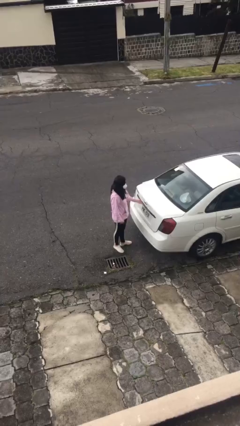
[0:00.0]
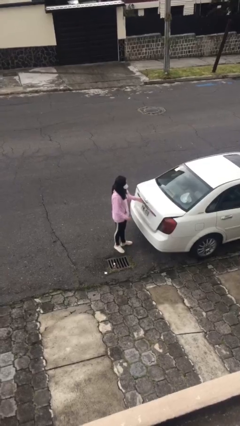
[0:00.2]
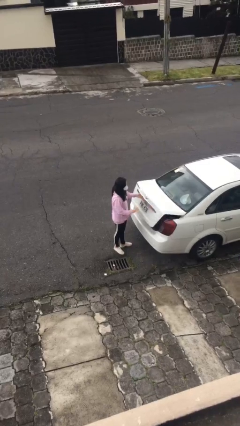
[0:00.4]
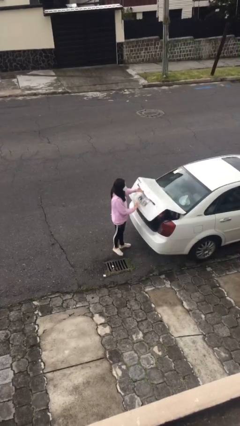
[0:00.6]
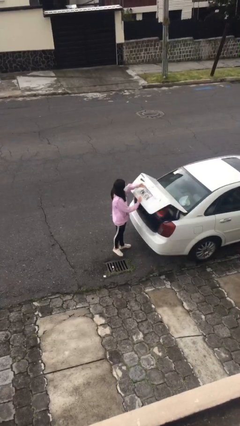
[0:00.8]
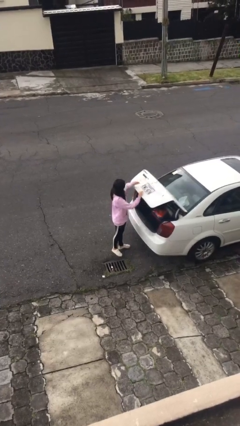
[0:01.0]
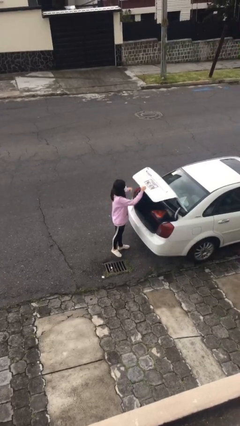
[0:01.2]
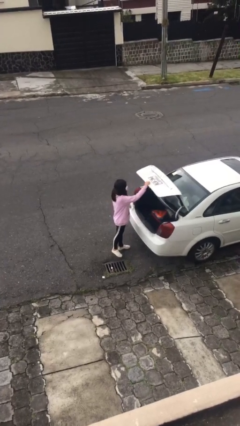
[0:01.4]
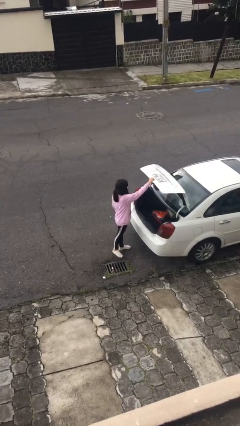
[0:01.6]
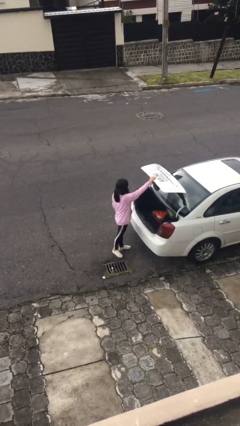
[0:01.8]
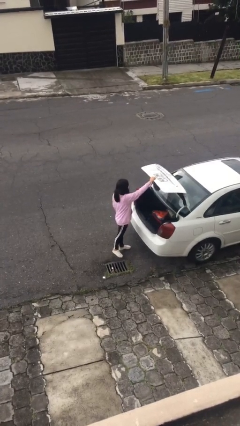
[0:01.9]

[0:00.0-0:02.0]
person opens car trunk

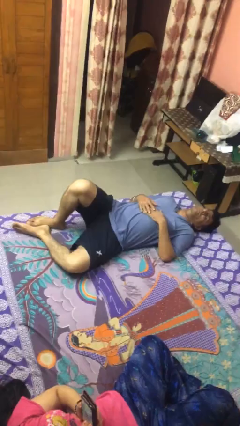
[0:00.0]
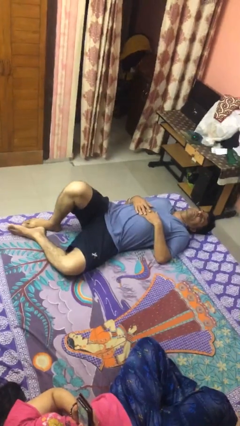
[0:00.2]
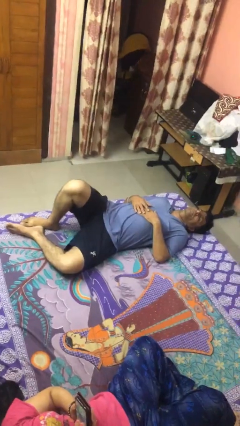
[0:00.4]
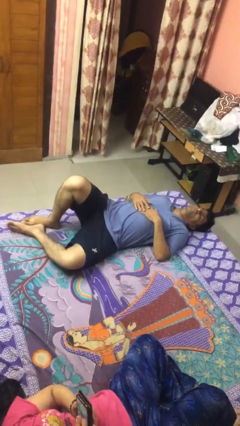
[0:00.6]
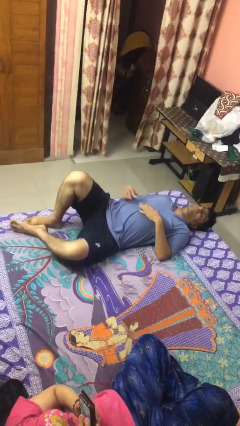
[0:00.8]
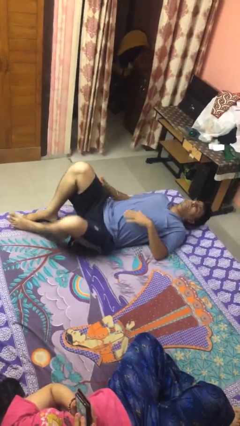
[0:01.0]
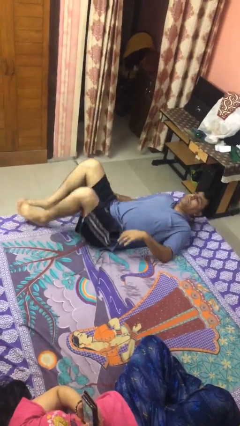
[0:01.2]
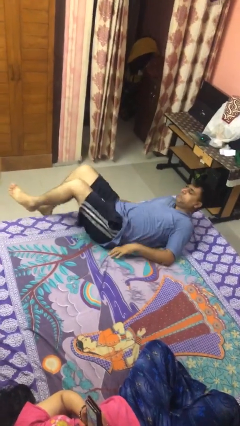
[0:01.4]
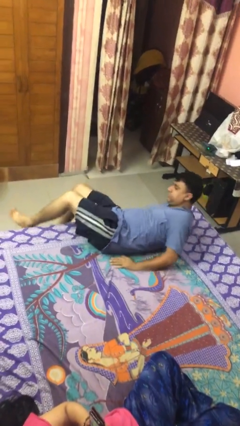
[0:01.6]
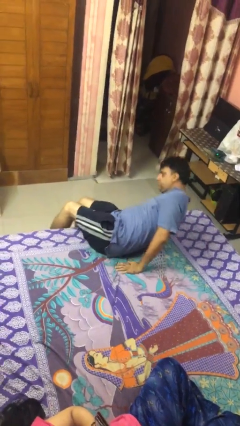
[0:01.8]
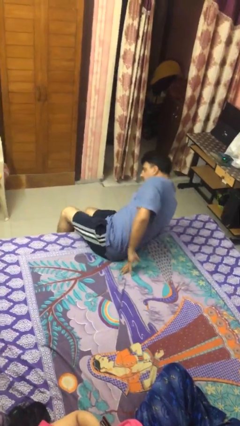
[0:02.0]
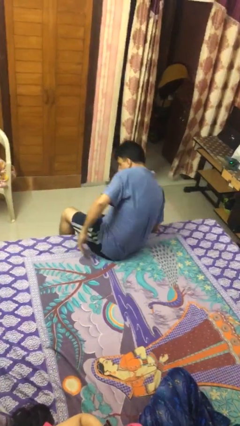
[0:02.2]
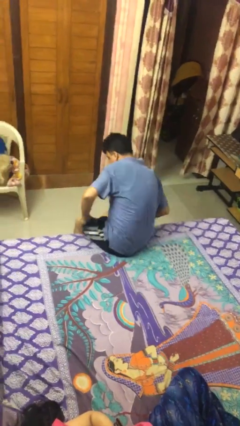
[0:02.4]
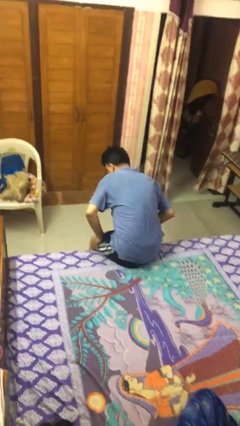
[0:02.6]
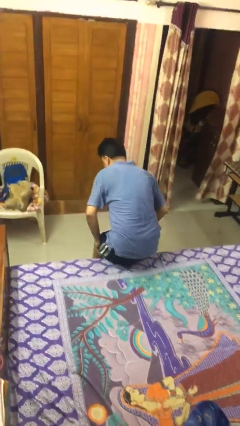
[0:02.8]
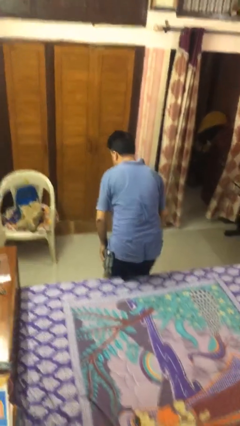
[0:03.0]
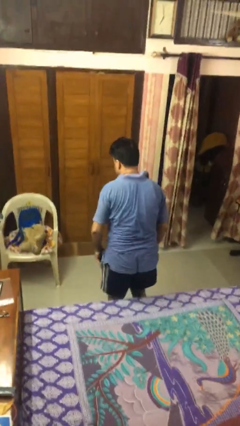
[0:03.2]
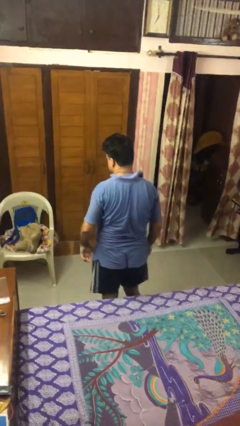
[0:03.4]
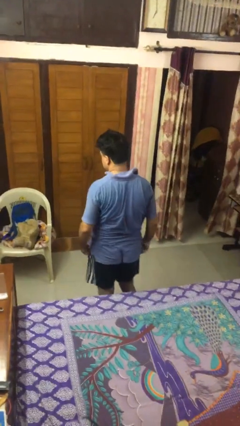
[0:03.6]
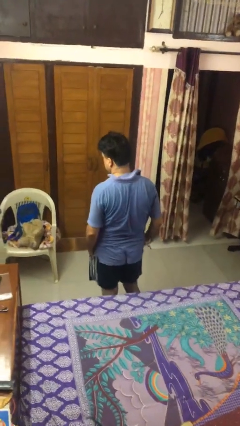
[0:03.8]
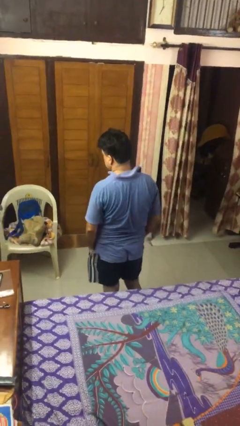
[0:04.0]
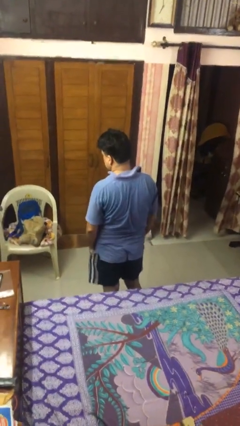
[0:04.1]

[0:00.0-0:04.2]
person stands up

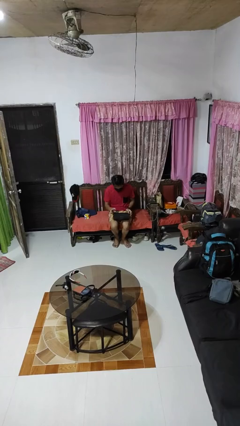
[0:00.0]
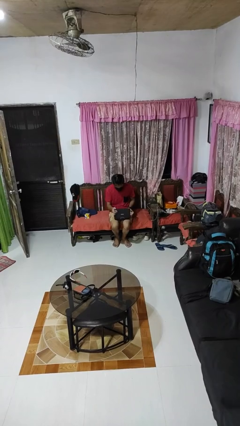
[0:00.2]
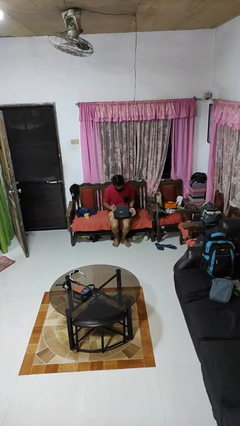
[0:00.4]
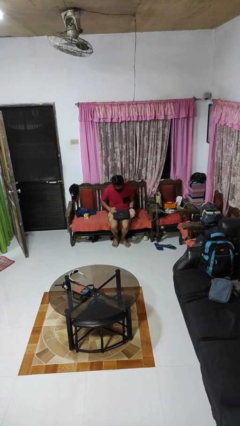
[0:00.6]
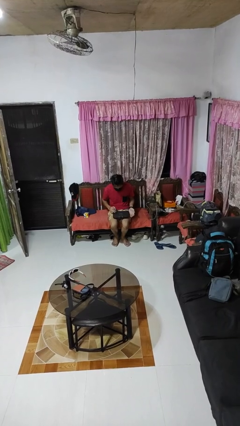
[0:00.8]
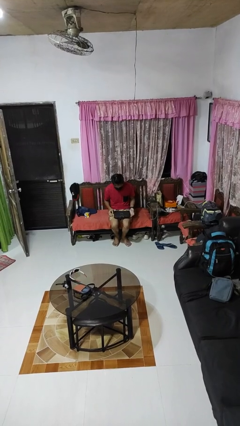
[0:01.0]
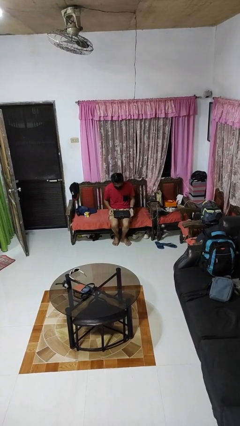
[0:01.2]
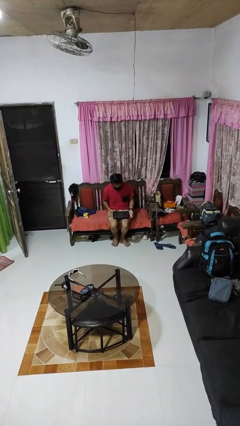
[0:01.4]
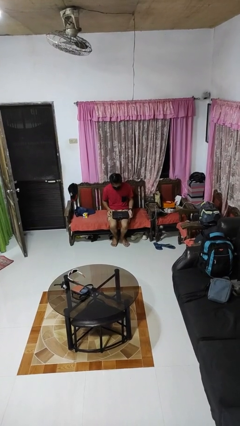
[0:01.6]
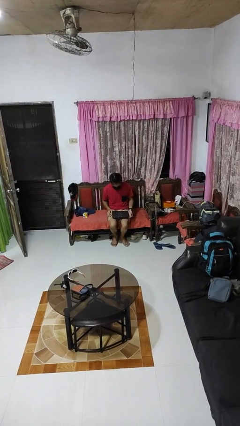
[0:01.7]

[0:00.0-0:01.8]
person closes laptop

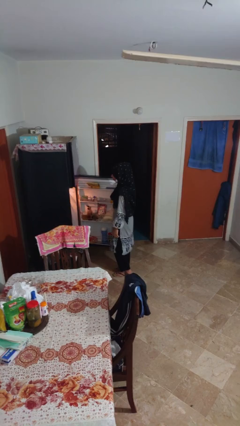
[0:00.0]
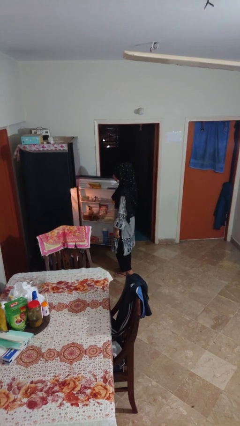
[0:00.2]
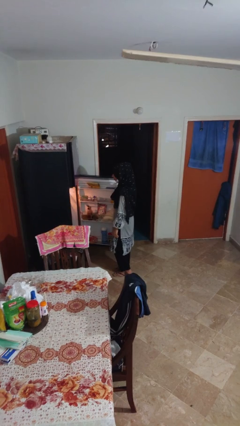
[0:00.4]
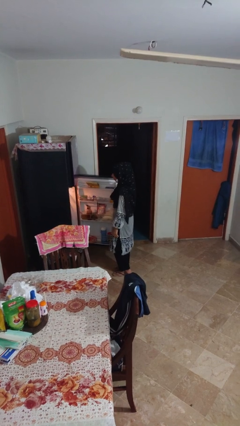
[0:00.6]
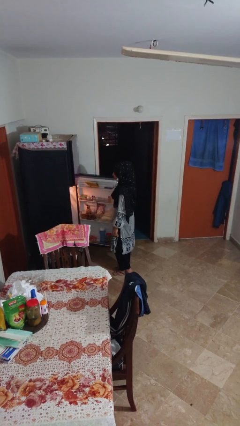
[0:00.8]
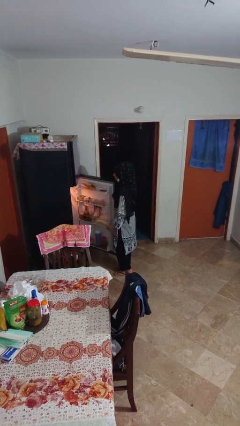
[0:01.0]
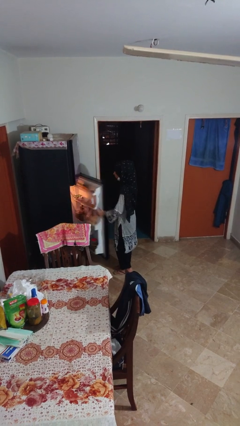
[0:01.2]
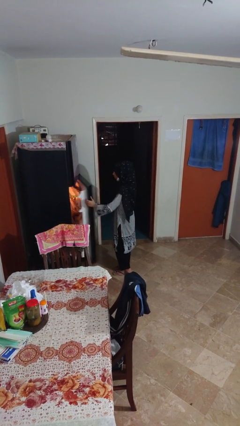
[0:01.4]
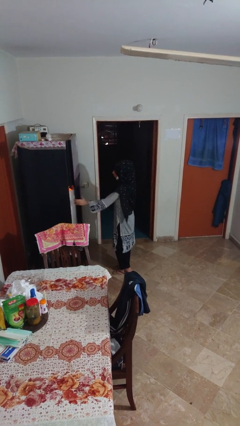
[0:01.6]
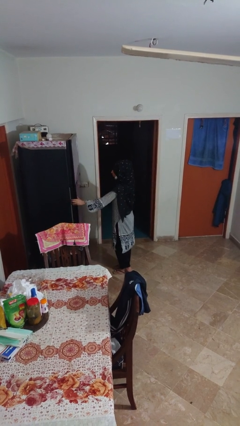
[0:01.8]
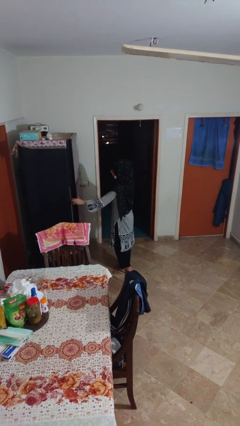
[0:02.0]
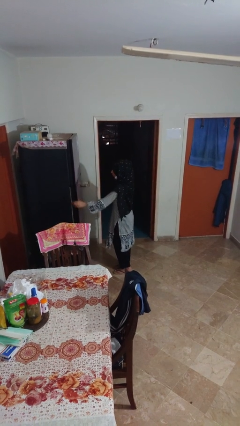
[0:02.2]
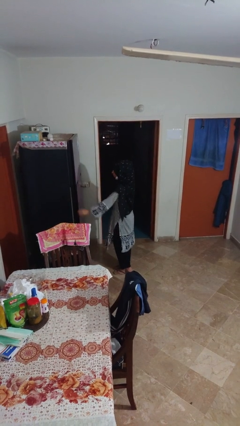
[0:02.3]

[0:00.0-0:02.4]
person closes refrigerator

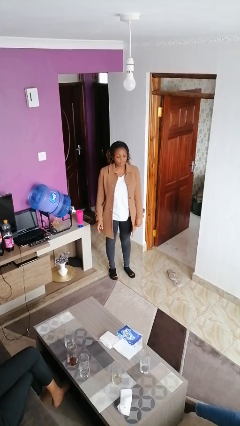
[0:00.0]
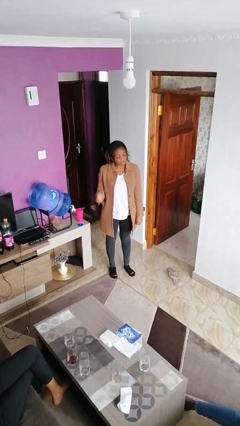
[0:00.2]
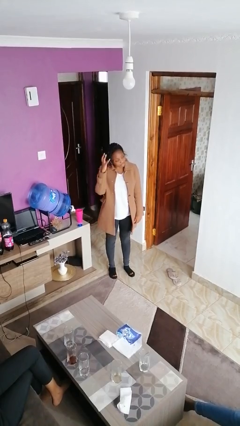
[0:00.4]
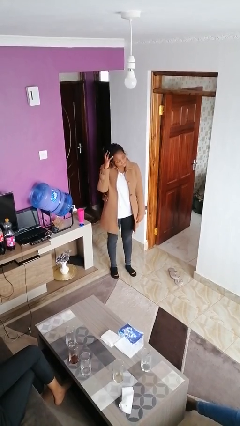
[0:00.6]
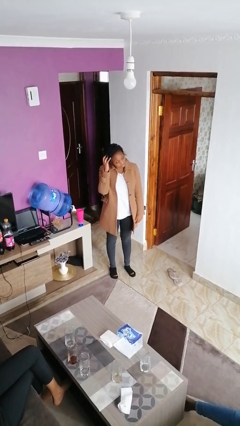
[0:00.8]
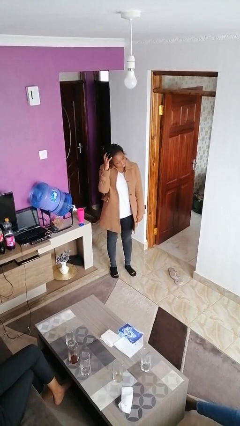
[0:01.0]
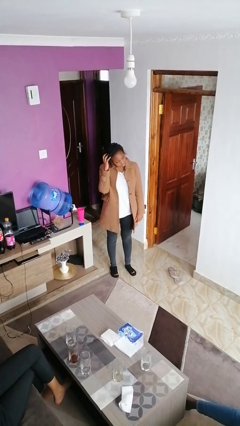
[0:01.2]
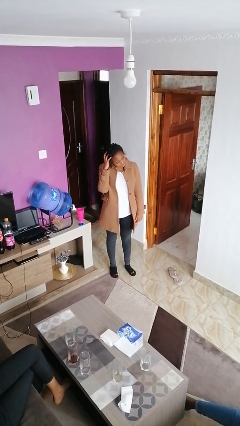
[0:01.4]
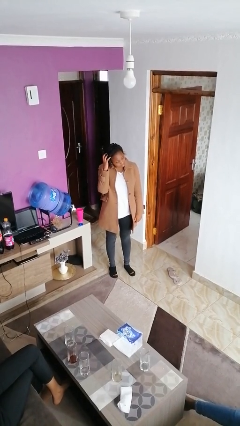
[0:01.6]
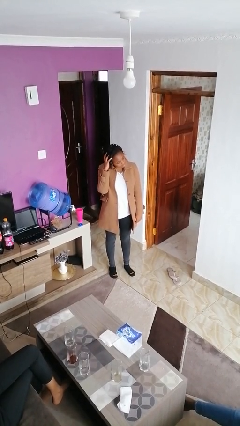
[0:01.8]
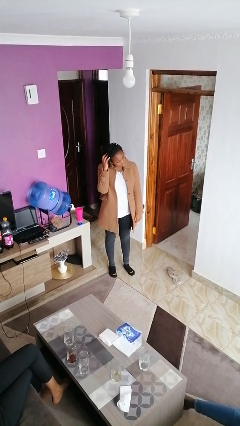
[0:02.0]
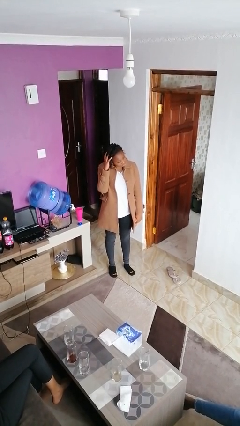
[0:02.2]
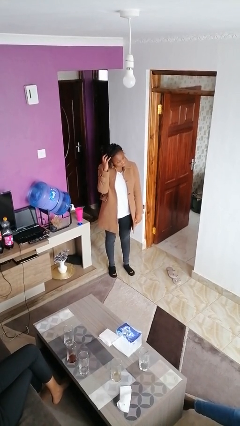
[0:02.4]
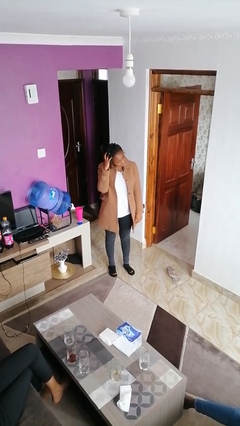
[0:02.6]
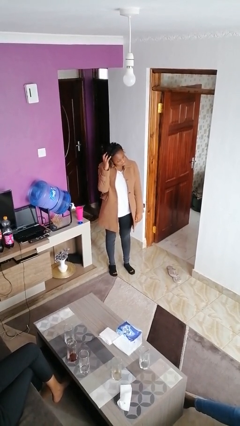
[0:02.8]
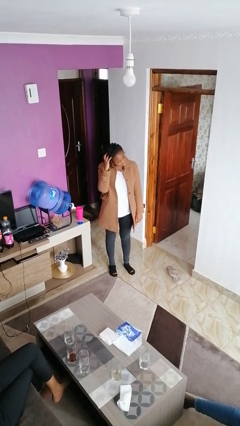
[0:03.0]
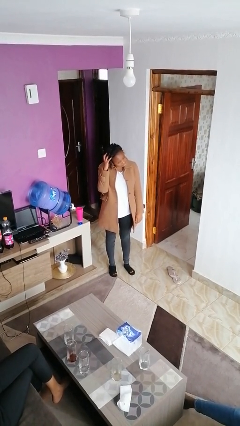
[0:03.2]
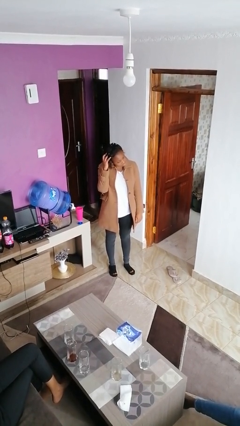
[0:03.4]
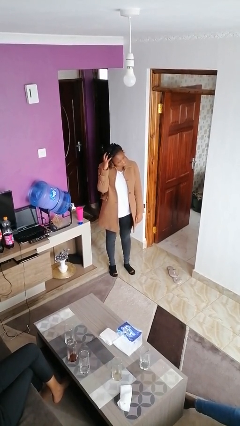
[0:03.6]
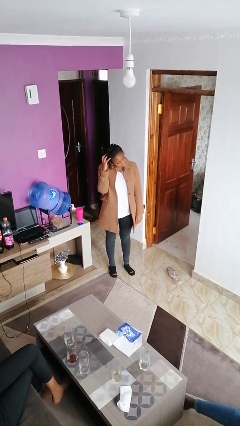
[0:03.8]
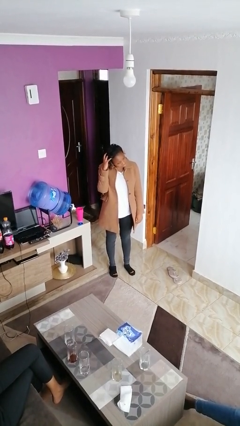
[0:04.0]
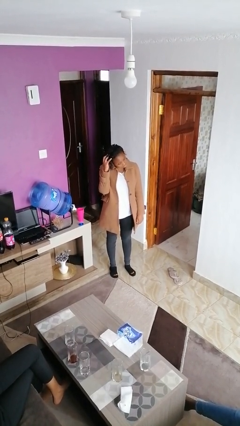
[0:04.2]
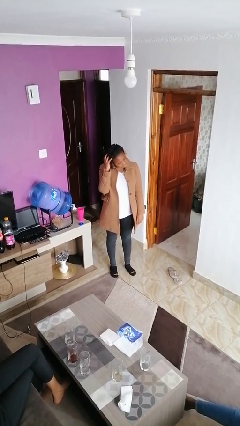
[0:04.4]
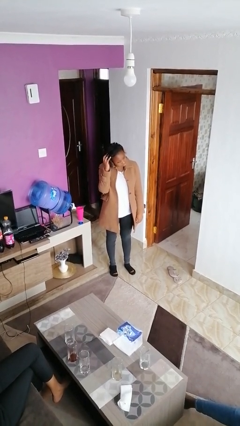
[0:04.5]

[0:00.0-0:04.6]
person scratches face

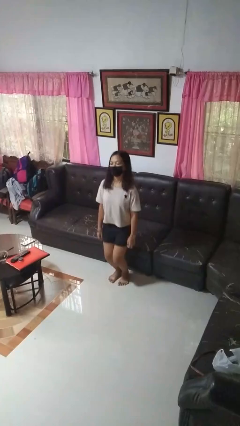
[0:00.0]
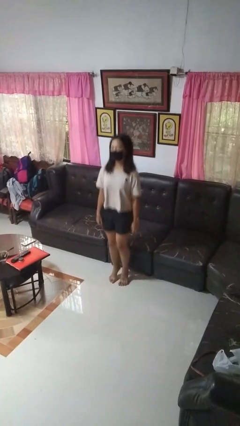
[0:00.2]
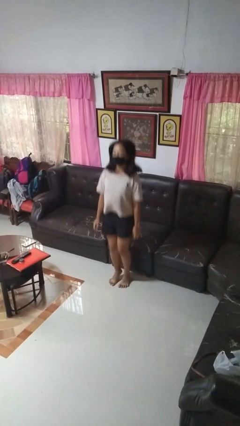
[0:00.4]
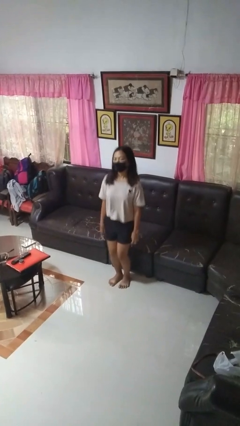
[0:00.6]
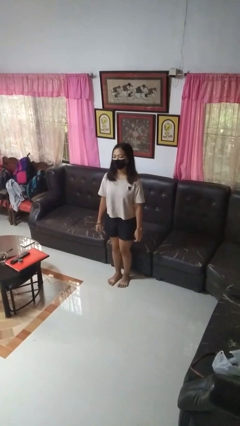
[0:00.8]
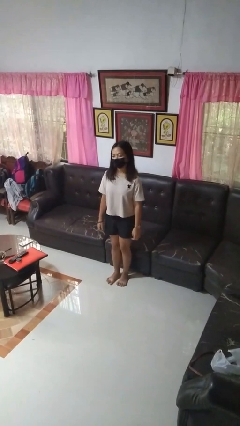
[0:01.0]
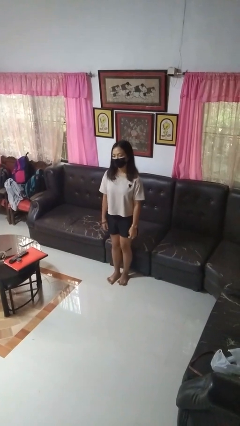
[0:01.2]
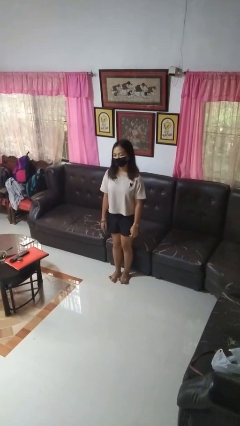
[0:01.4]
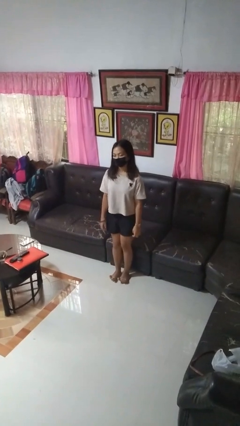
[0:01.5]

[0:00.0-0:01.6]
person jumps

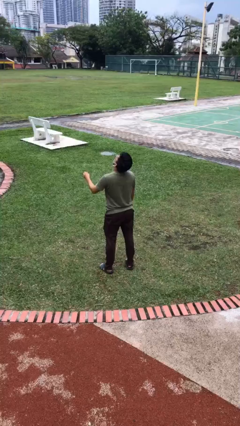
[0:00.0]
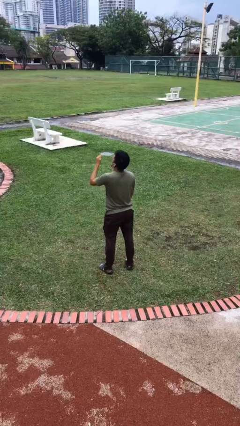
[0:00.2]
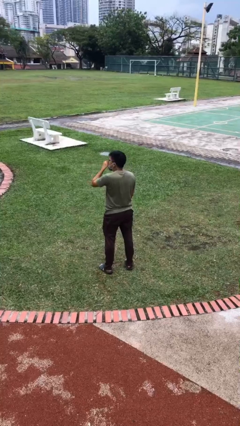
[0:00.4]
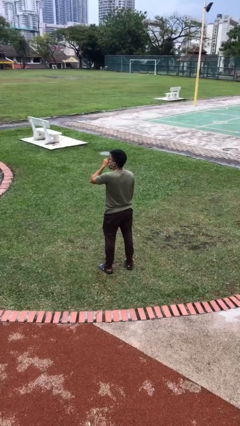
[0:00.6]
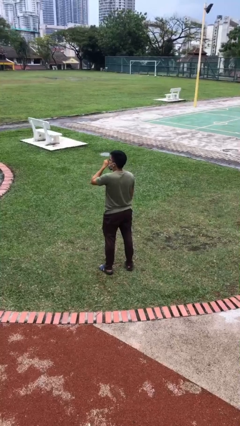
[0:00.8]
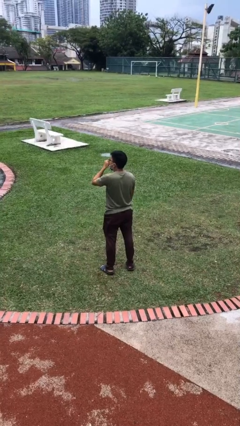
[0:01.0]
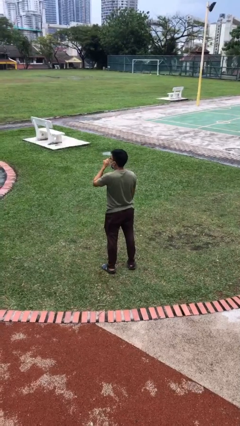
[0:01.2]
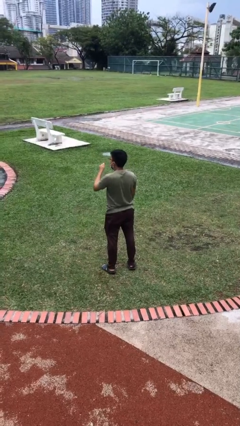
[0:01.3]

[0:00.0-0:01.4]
person sneezes into hand
